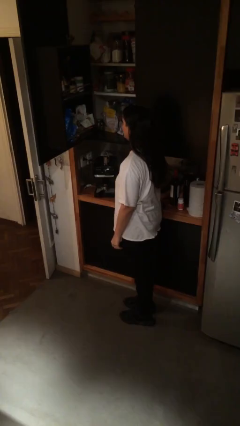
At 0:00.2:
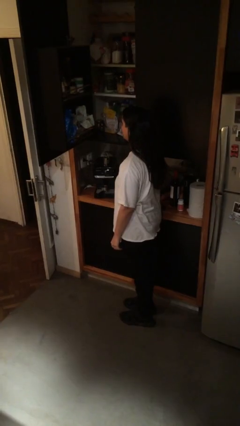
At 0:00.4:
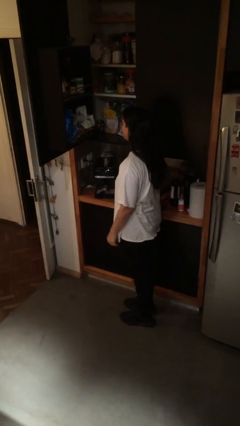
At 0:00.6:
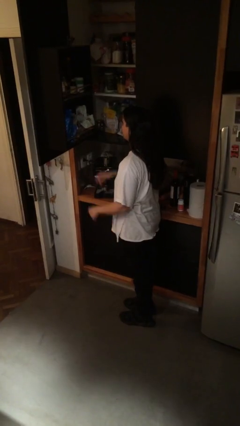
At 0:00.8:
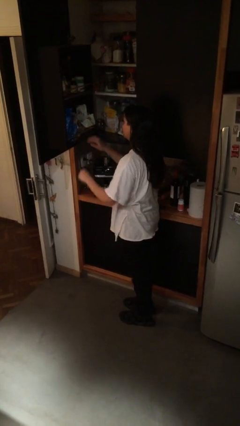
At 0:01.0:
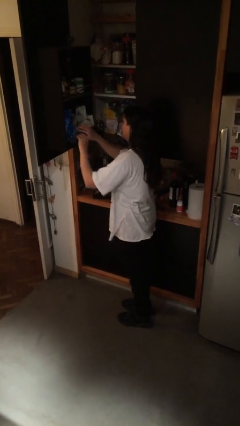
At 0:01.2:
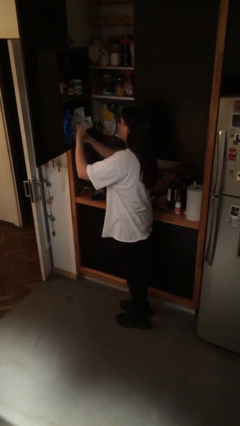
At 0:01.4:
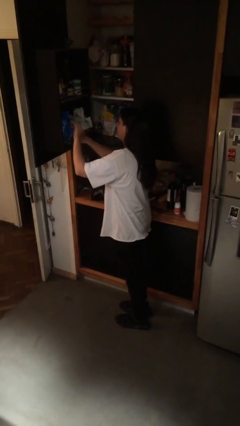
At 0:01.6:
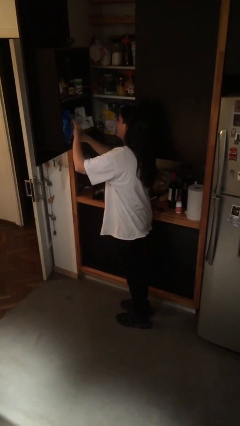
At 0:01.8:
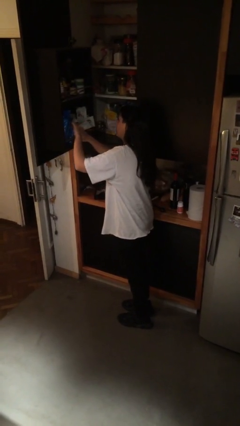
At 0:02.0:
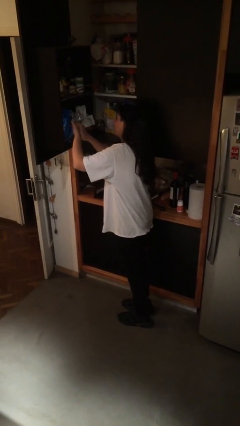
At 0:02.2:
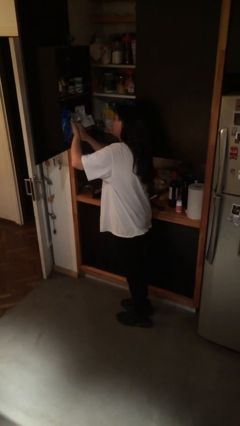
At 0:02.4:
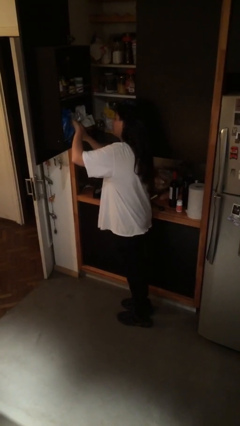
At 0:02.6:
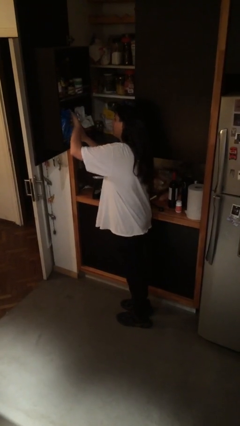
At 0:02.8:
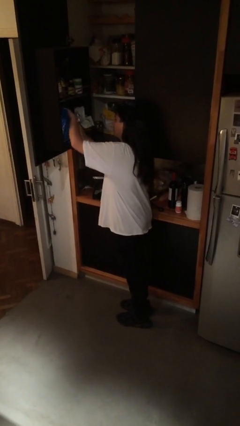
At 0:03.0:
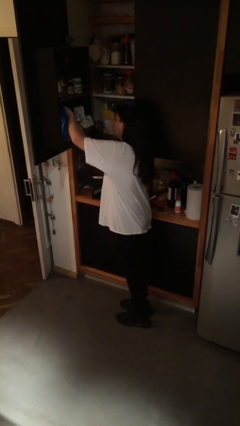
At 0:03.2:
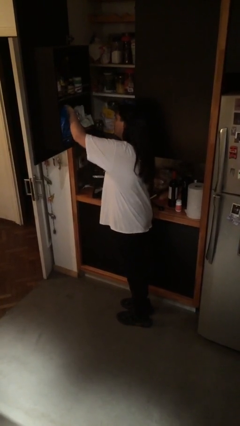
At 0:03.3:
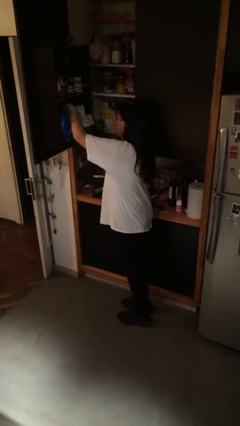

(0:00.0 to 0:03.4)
person searches in cabinet

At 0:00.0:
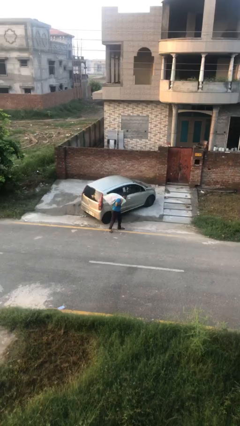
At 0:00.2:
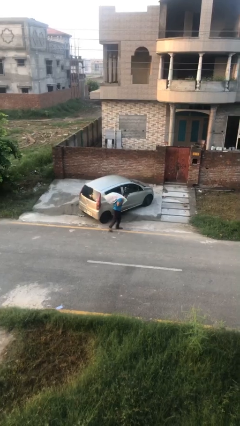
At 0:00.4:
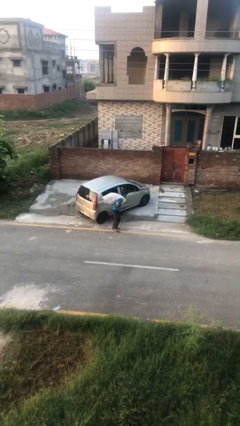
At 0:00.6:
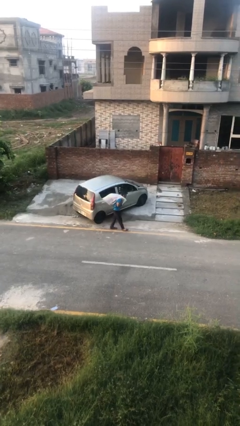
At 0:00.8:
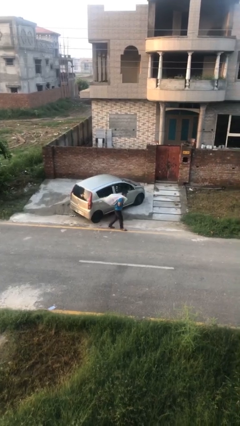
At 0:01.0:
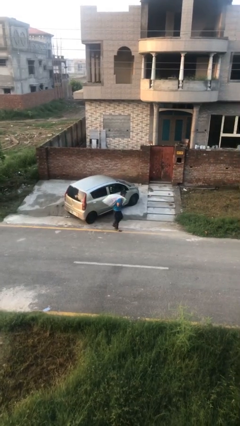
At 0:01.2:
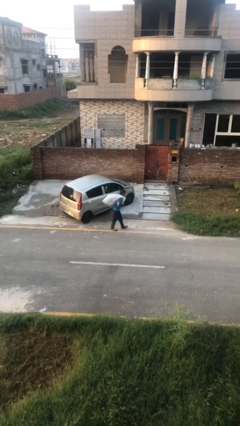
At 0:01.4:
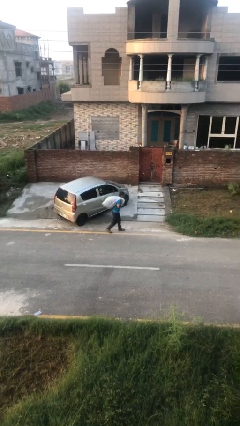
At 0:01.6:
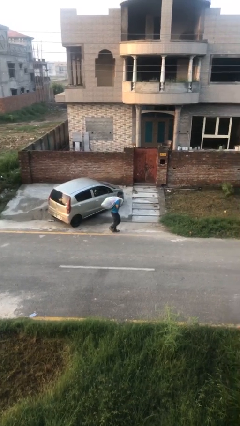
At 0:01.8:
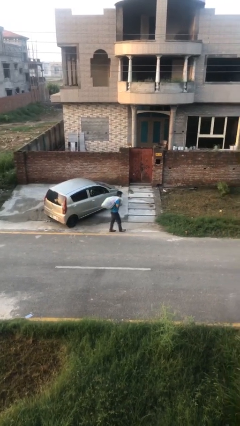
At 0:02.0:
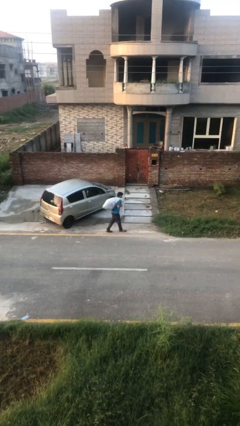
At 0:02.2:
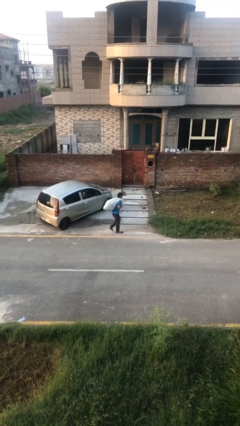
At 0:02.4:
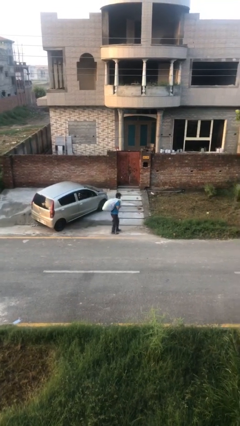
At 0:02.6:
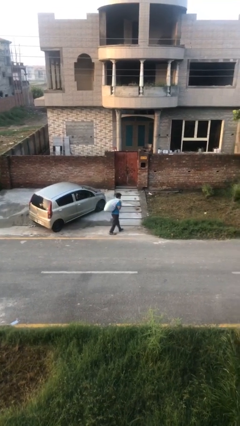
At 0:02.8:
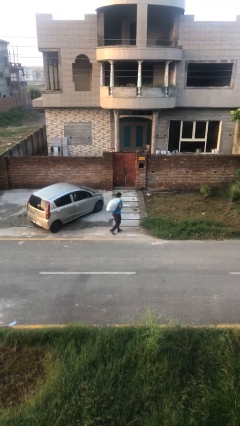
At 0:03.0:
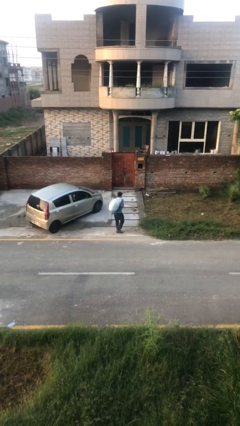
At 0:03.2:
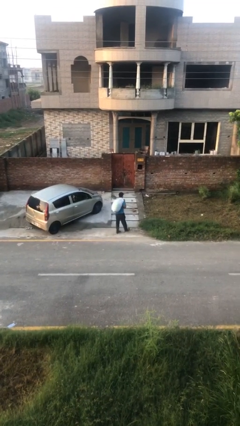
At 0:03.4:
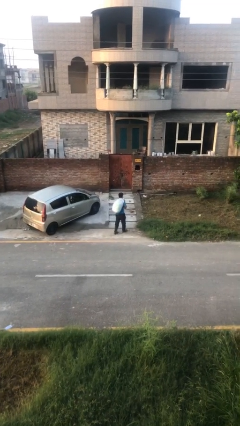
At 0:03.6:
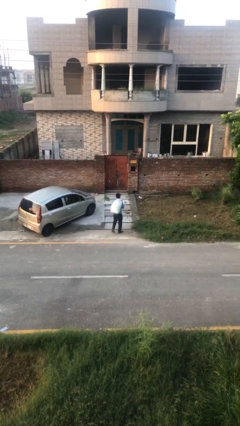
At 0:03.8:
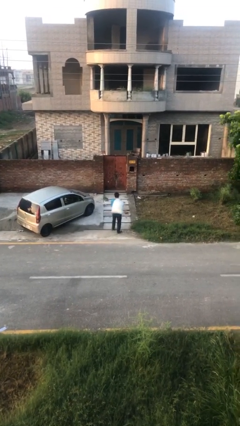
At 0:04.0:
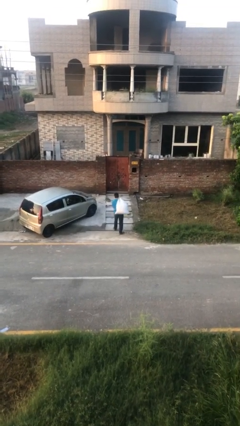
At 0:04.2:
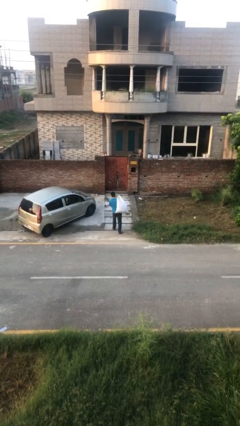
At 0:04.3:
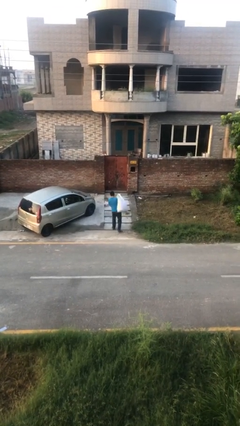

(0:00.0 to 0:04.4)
person carries heavy object

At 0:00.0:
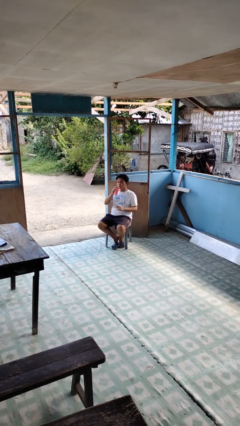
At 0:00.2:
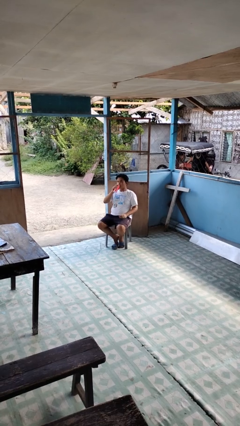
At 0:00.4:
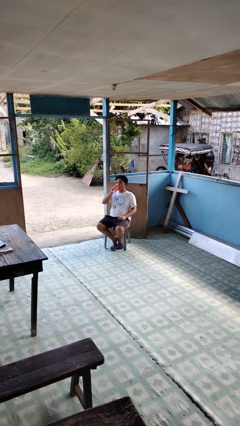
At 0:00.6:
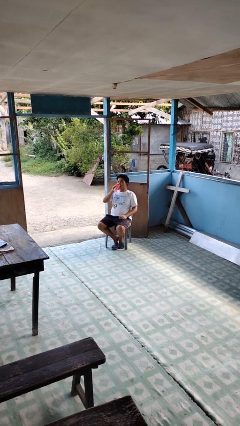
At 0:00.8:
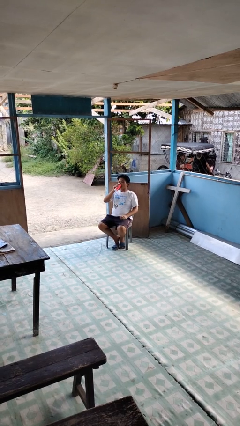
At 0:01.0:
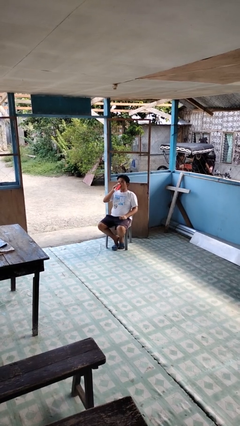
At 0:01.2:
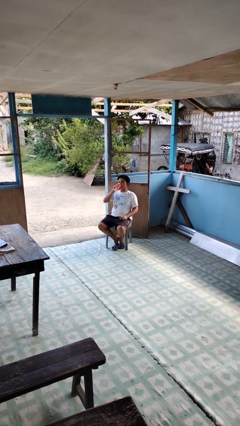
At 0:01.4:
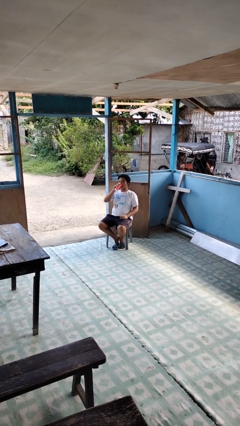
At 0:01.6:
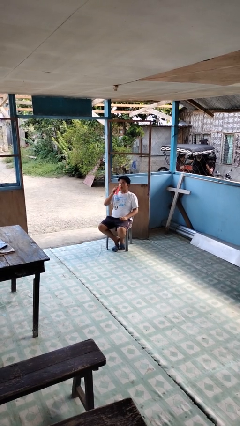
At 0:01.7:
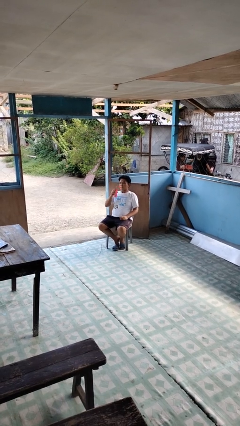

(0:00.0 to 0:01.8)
person drinks from beverage can

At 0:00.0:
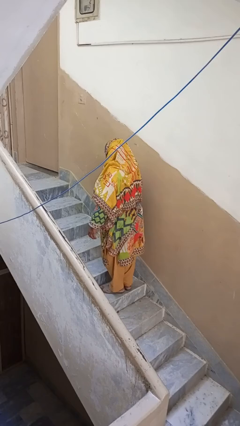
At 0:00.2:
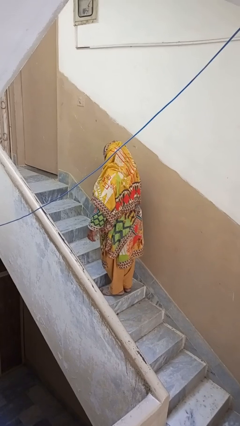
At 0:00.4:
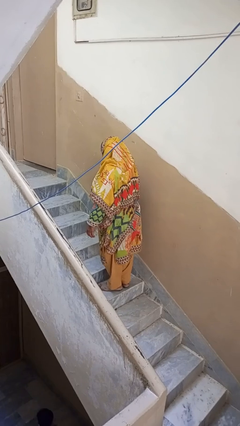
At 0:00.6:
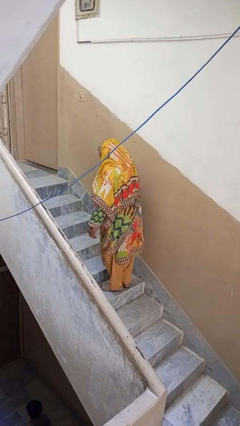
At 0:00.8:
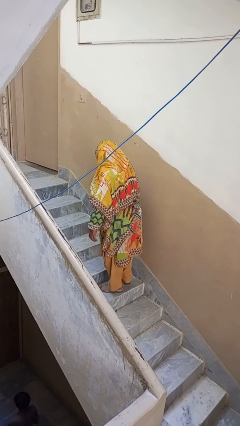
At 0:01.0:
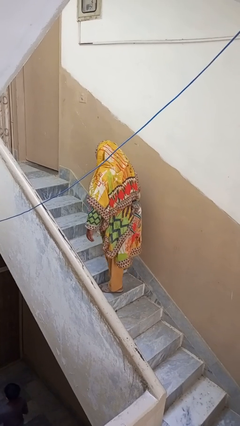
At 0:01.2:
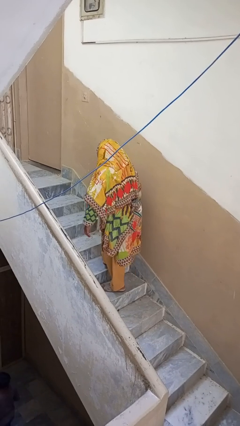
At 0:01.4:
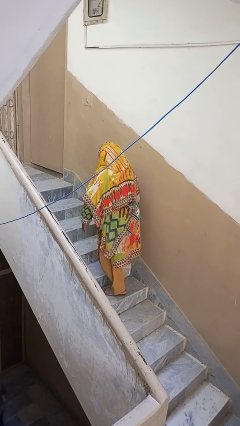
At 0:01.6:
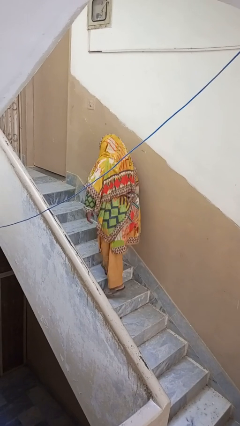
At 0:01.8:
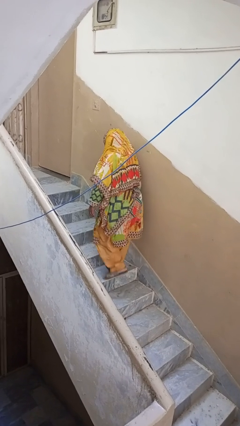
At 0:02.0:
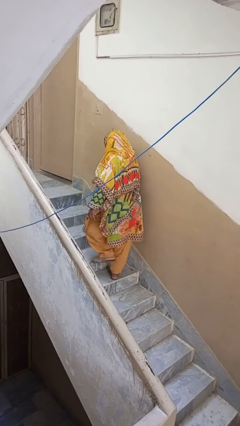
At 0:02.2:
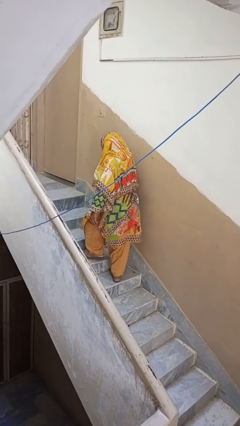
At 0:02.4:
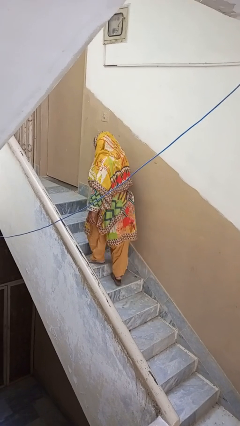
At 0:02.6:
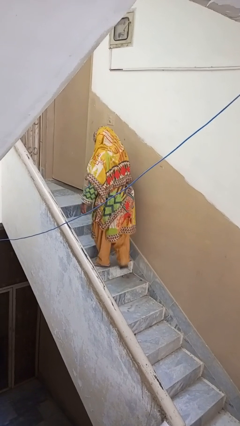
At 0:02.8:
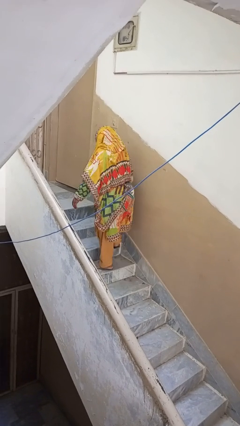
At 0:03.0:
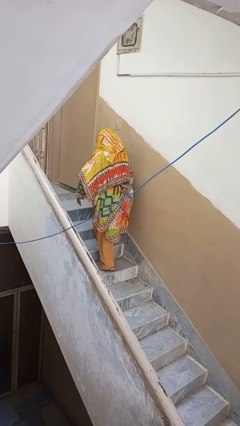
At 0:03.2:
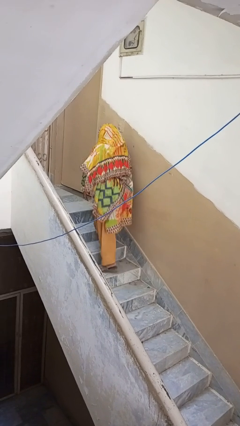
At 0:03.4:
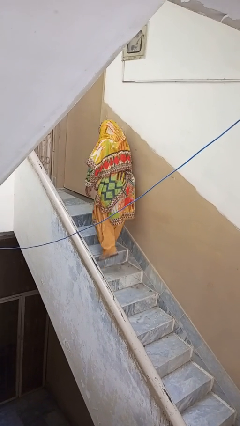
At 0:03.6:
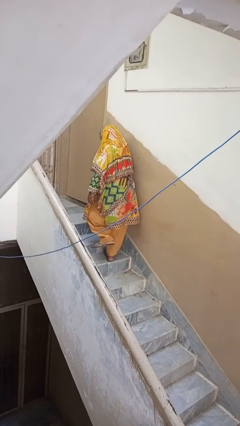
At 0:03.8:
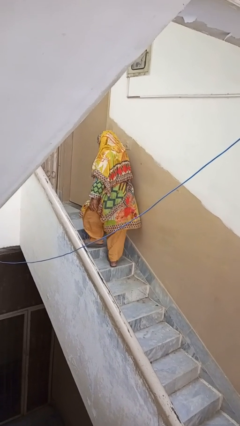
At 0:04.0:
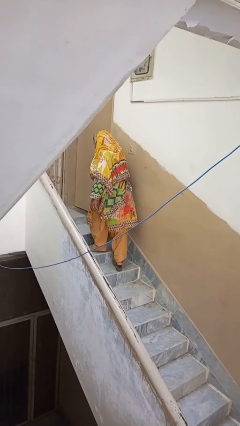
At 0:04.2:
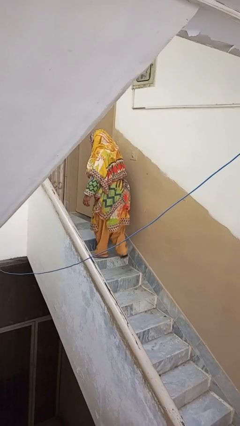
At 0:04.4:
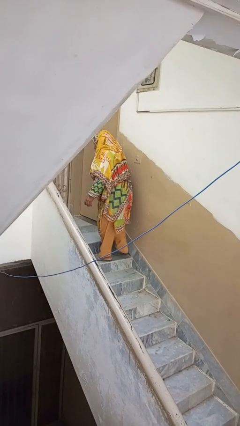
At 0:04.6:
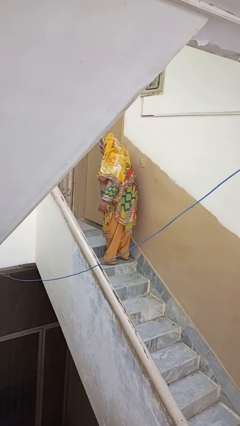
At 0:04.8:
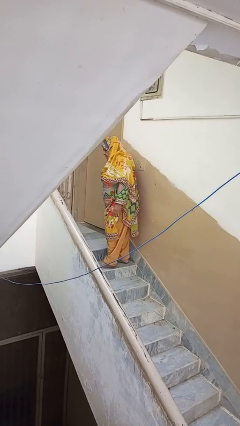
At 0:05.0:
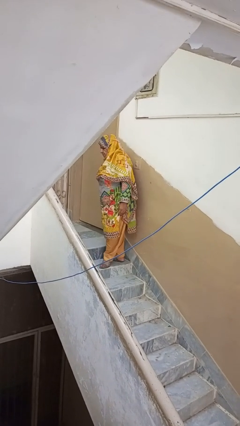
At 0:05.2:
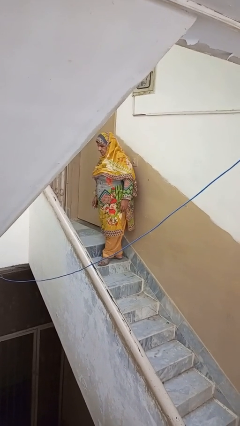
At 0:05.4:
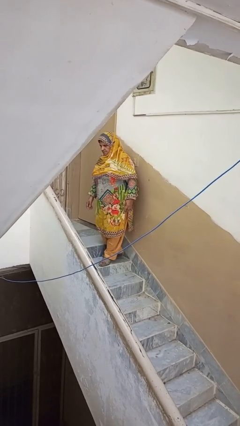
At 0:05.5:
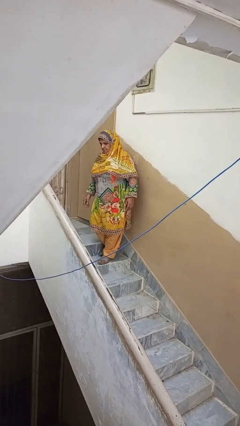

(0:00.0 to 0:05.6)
person climbs up stairs

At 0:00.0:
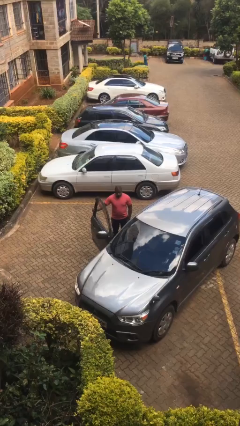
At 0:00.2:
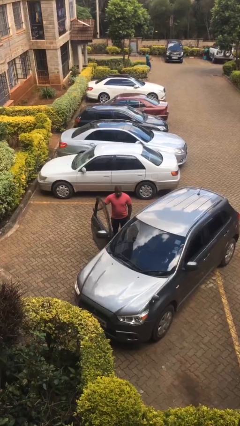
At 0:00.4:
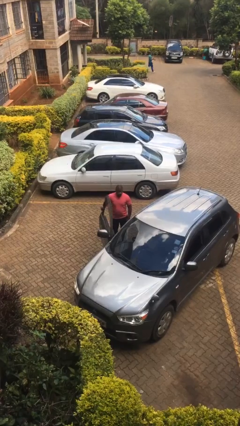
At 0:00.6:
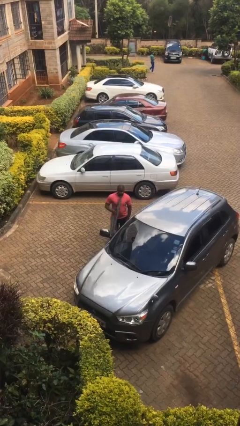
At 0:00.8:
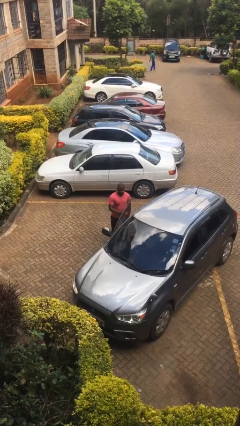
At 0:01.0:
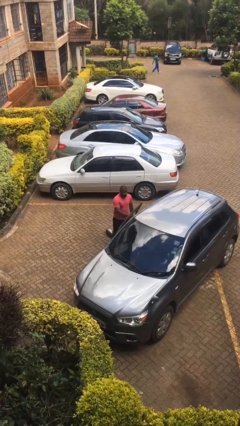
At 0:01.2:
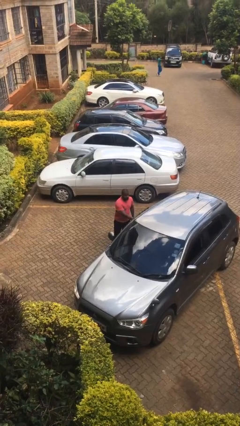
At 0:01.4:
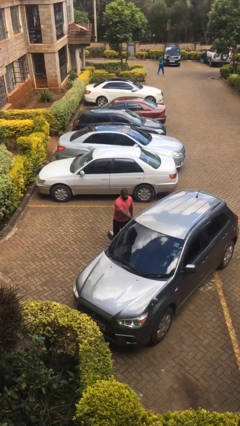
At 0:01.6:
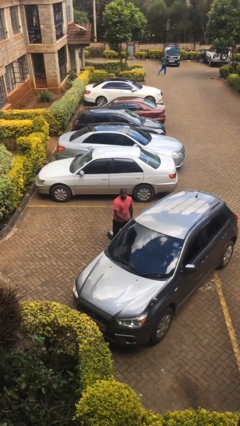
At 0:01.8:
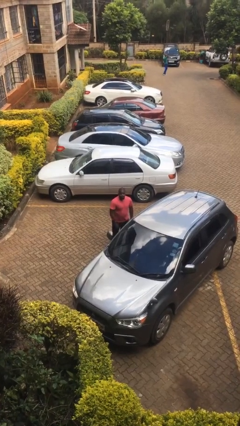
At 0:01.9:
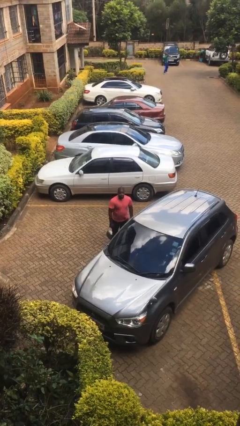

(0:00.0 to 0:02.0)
person closes car door

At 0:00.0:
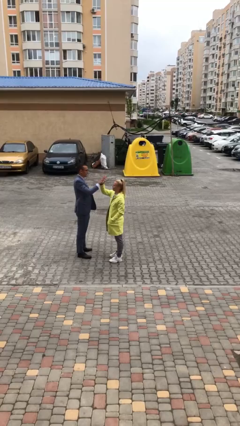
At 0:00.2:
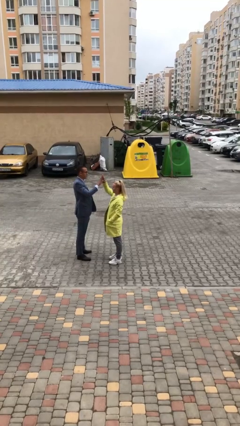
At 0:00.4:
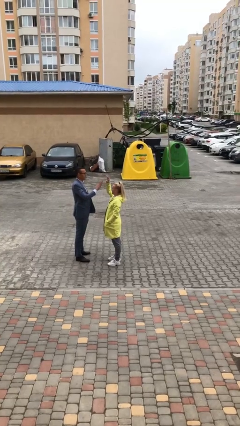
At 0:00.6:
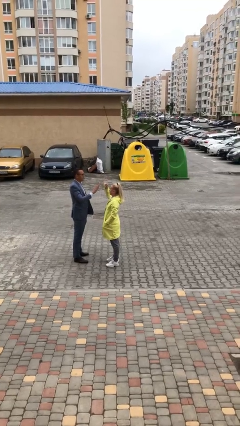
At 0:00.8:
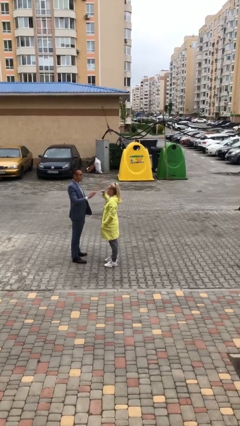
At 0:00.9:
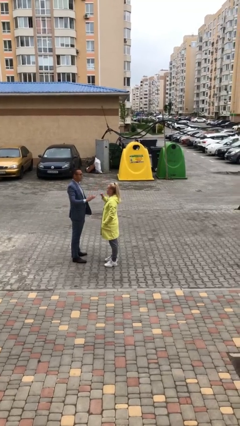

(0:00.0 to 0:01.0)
person highfives hand
